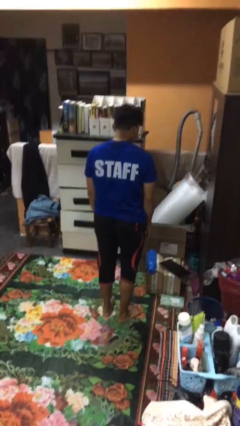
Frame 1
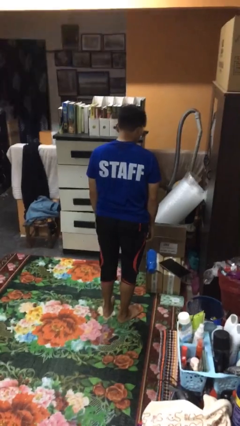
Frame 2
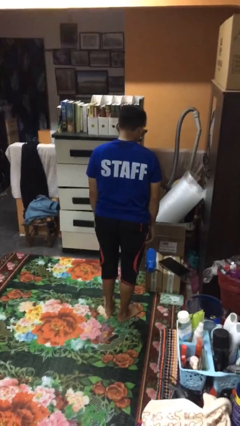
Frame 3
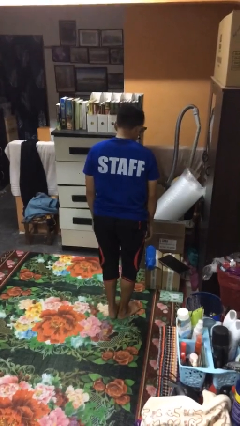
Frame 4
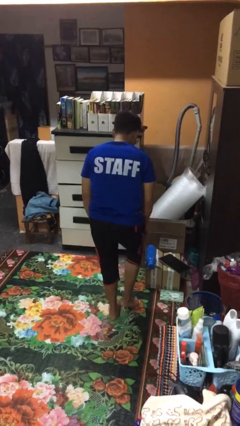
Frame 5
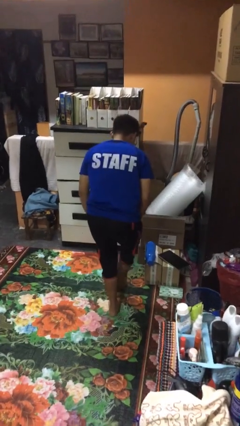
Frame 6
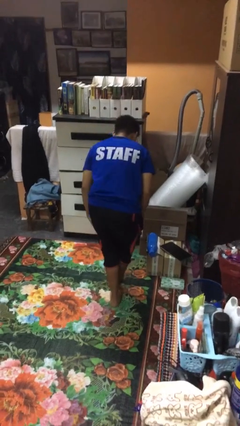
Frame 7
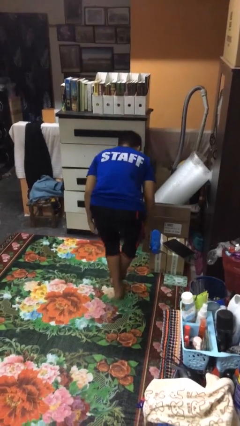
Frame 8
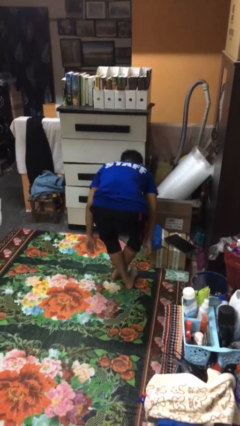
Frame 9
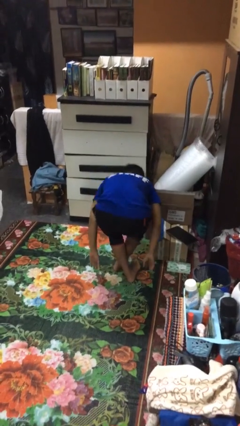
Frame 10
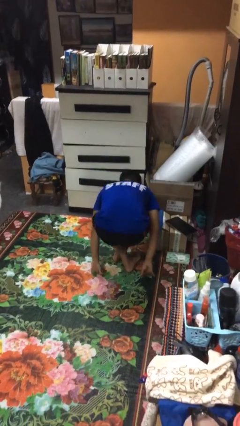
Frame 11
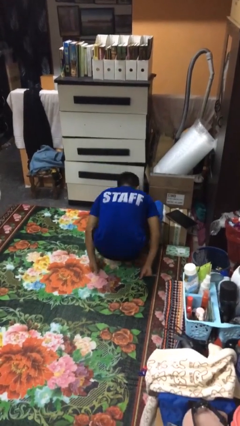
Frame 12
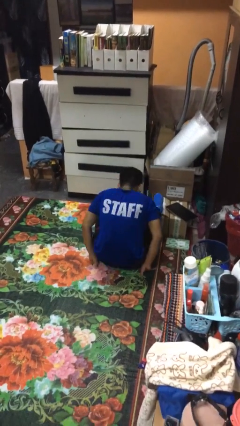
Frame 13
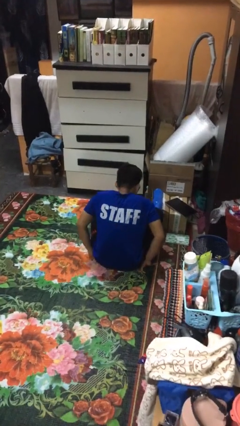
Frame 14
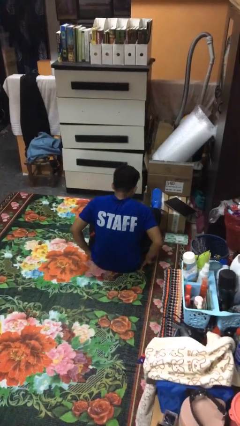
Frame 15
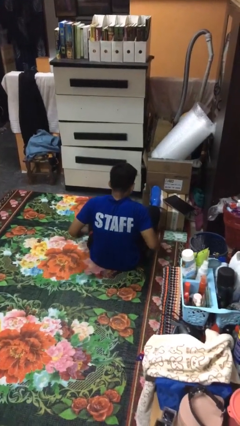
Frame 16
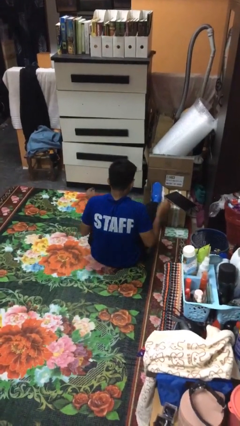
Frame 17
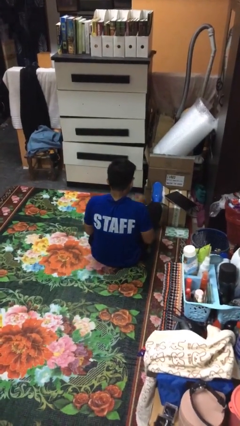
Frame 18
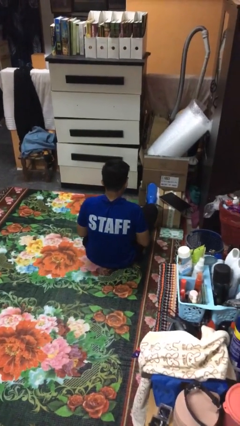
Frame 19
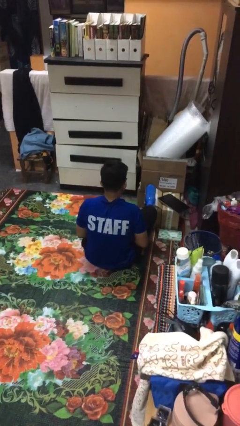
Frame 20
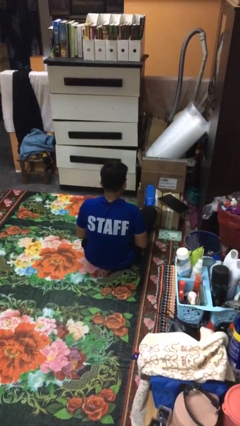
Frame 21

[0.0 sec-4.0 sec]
person sits crisscross

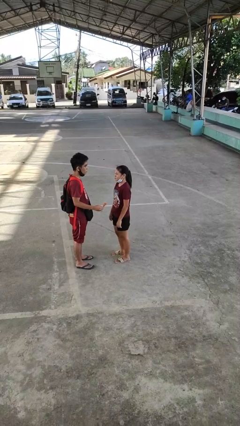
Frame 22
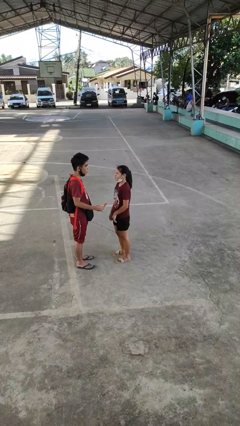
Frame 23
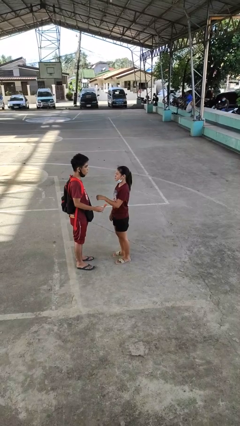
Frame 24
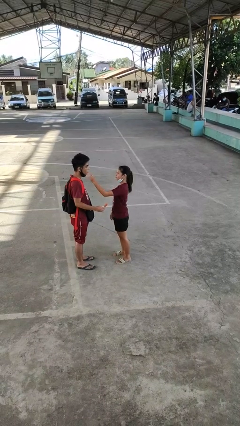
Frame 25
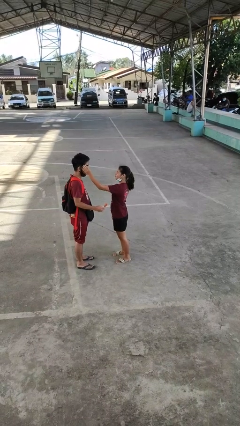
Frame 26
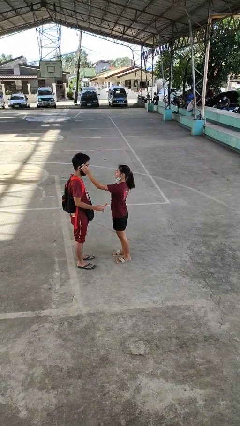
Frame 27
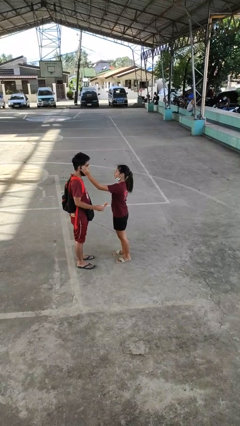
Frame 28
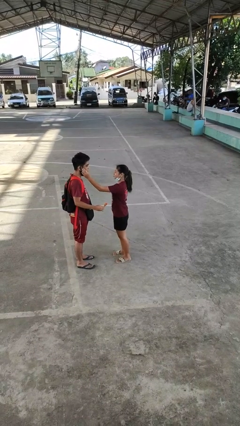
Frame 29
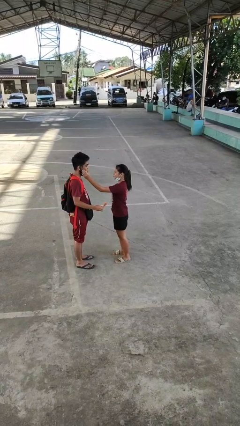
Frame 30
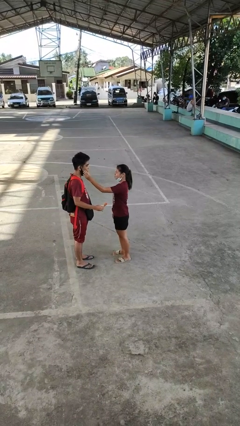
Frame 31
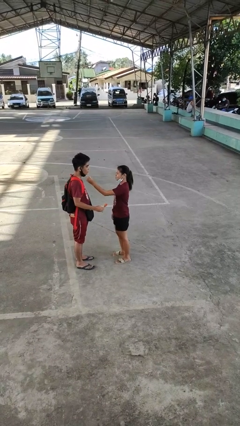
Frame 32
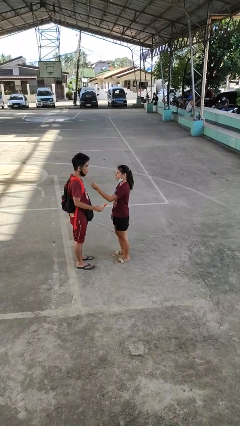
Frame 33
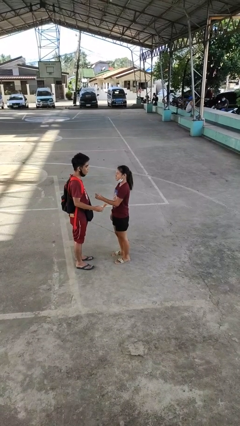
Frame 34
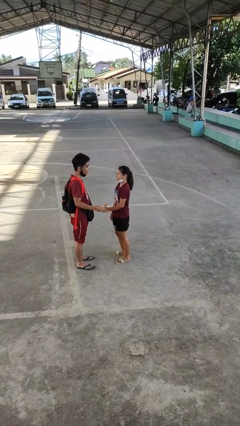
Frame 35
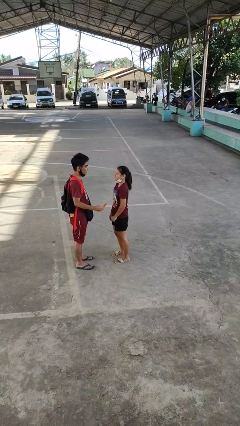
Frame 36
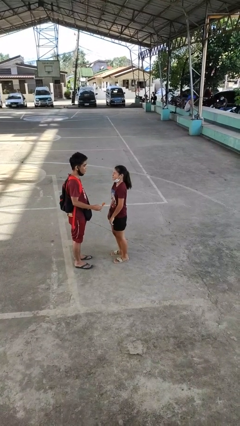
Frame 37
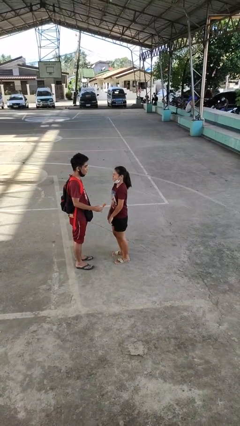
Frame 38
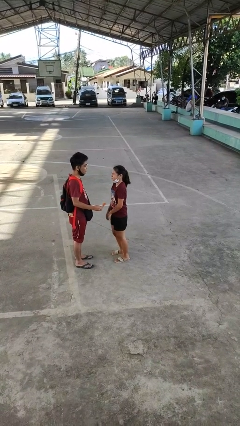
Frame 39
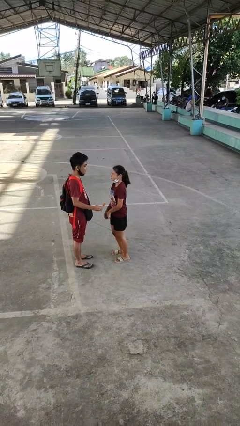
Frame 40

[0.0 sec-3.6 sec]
person touches face of person

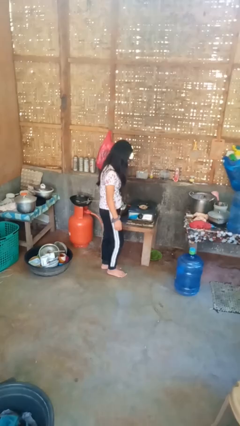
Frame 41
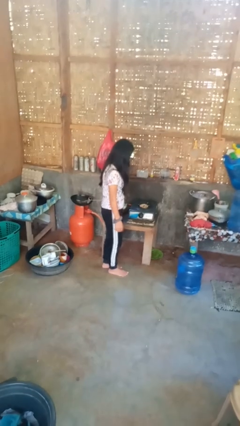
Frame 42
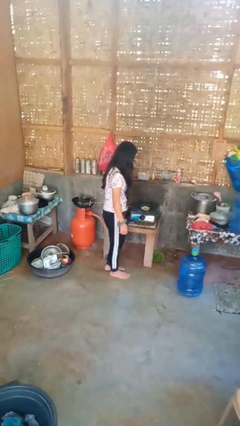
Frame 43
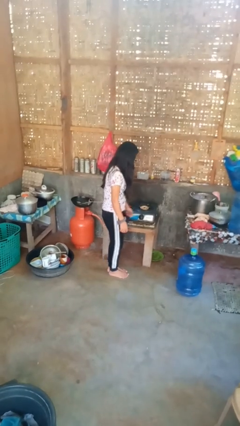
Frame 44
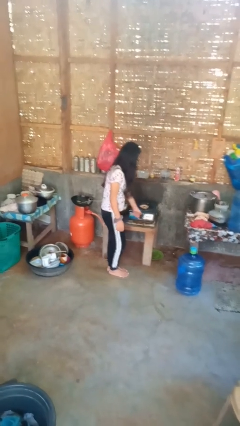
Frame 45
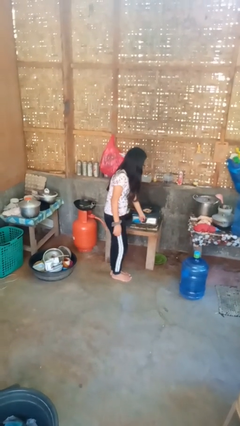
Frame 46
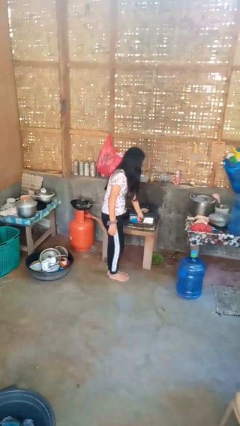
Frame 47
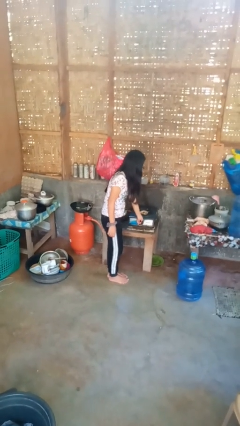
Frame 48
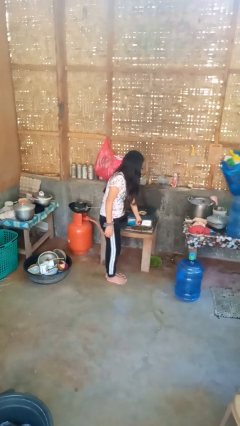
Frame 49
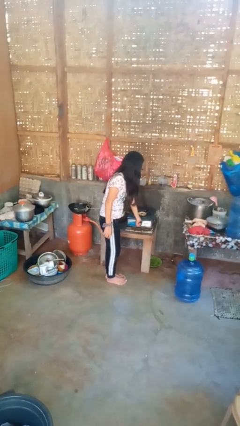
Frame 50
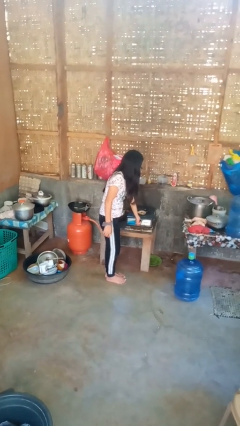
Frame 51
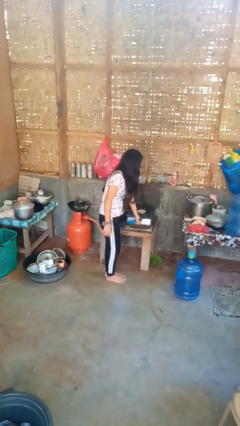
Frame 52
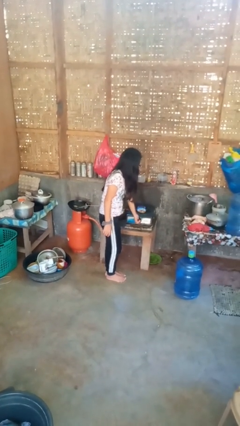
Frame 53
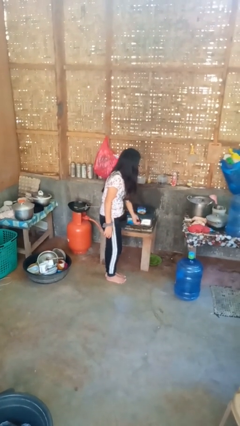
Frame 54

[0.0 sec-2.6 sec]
person turns on stovetop

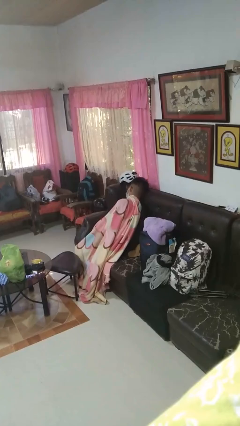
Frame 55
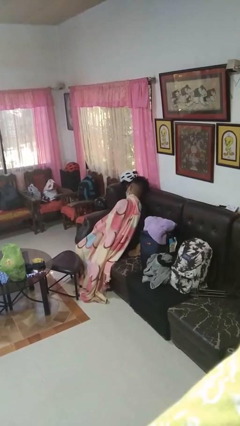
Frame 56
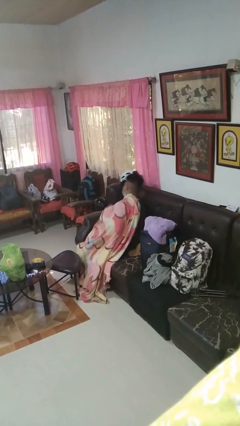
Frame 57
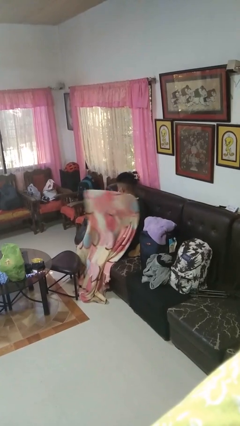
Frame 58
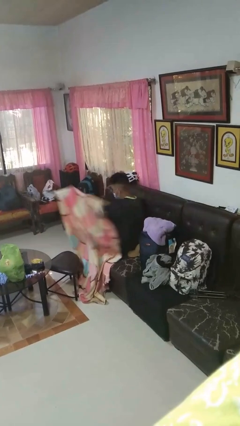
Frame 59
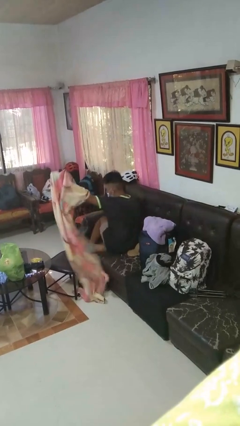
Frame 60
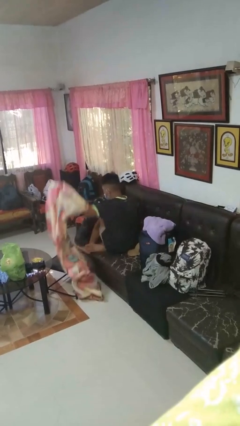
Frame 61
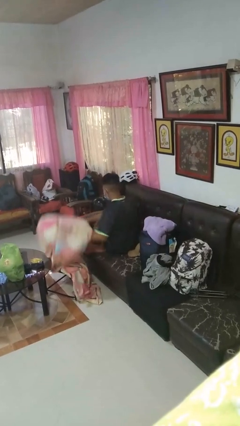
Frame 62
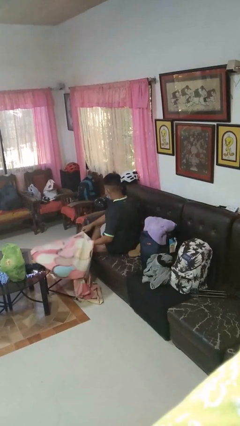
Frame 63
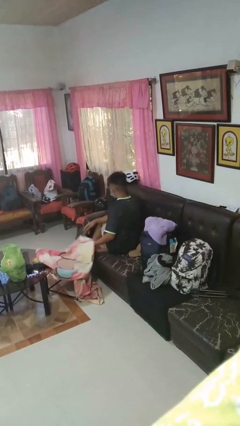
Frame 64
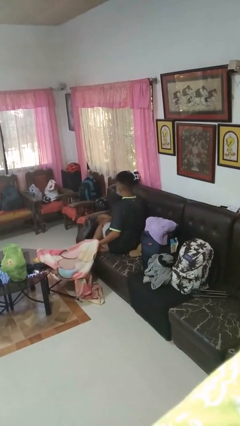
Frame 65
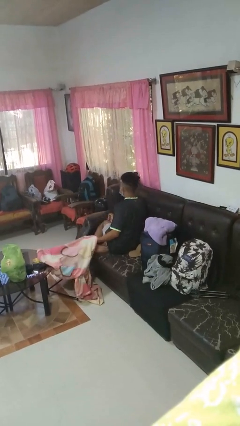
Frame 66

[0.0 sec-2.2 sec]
person uncovers with blanket

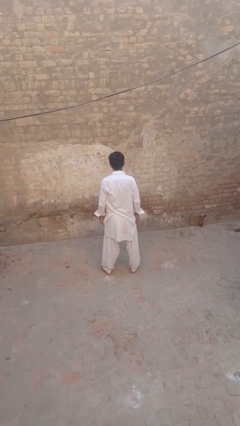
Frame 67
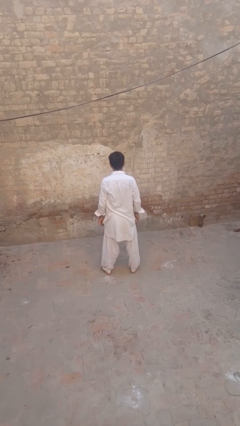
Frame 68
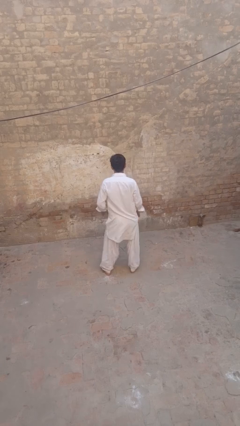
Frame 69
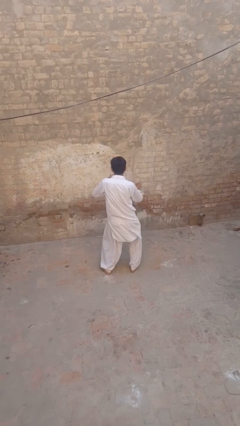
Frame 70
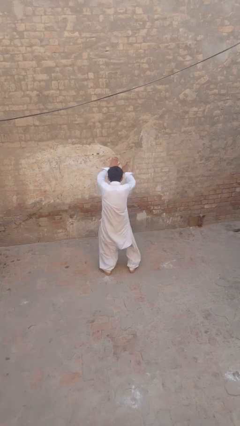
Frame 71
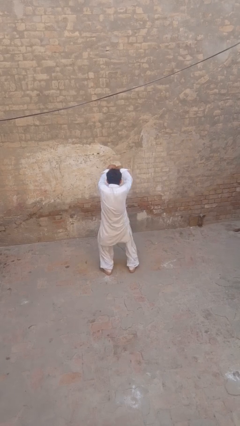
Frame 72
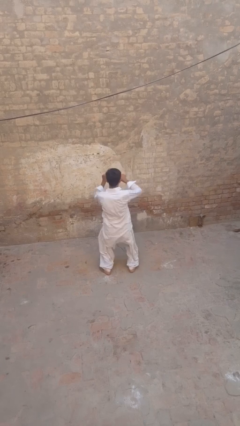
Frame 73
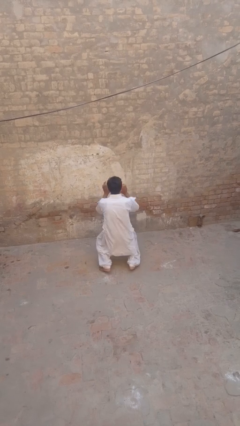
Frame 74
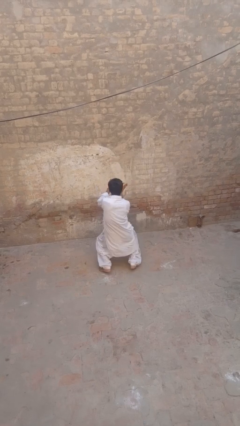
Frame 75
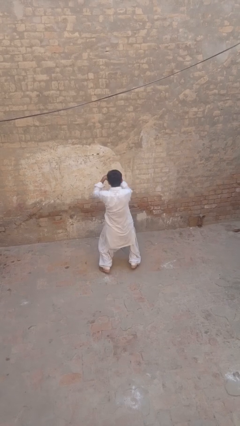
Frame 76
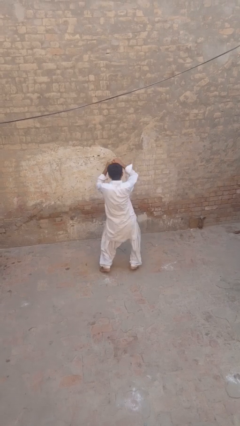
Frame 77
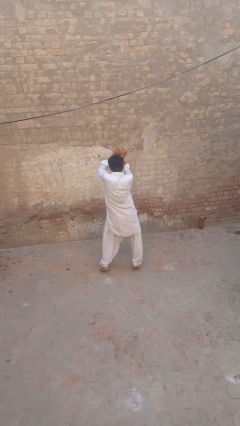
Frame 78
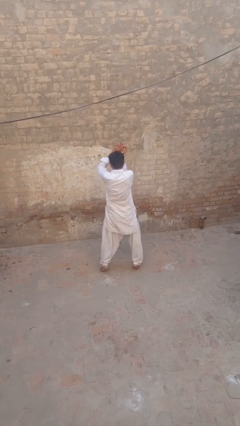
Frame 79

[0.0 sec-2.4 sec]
person dances in place

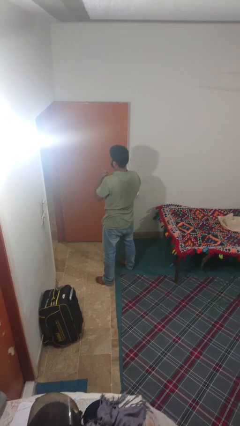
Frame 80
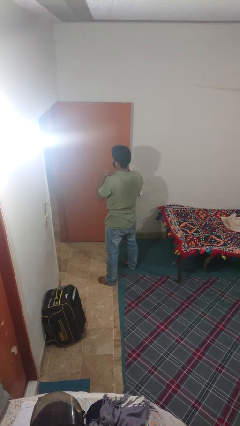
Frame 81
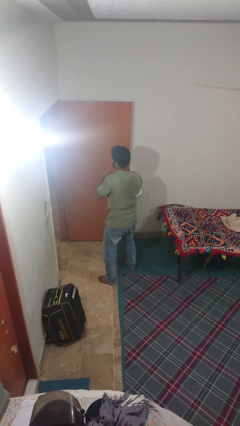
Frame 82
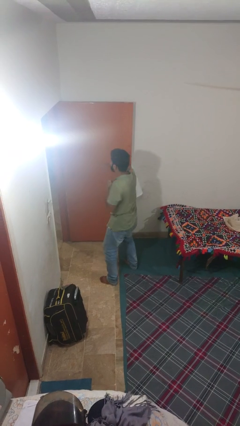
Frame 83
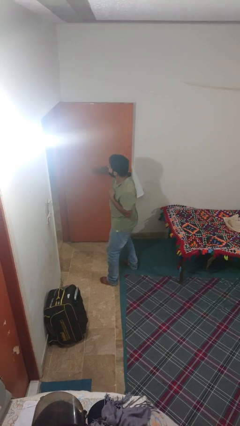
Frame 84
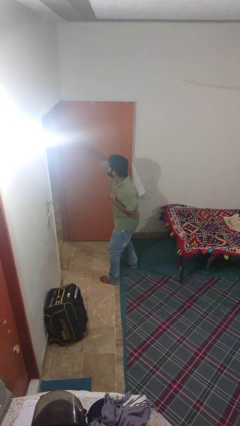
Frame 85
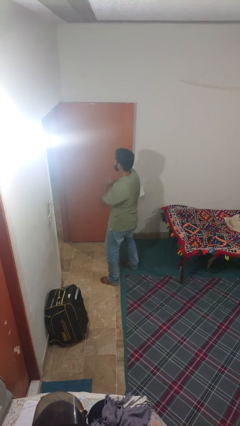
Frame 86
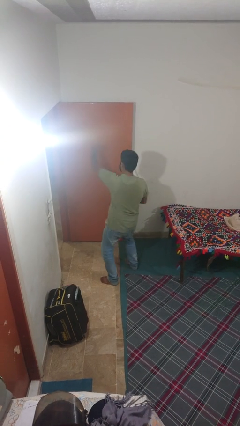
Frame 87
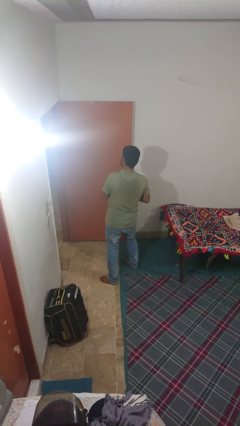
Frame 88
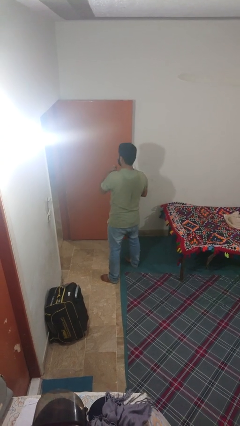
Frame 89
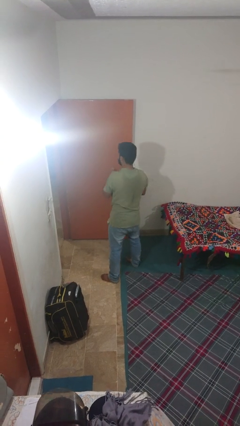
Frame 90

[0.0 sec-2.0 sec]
person punches
